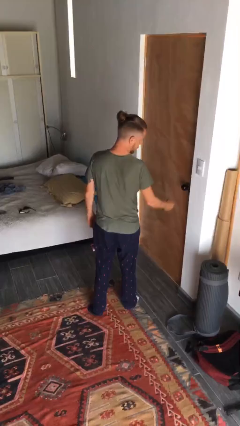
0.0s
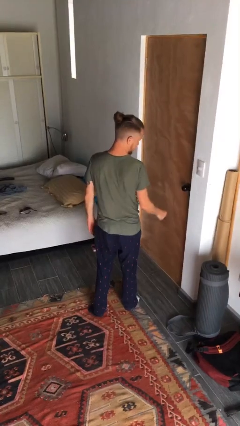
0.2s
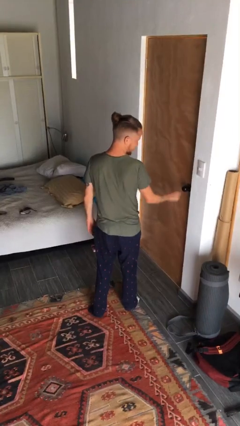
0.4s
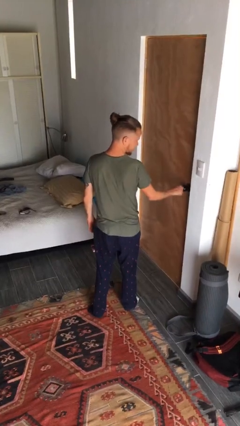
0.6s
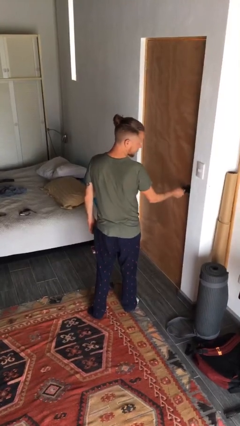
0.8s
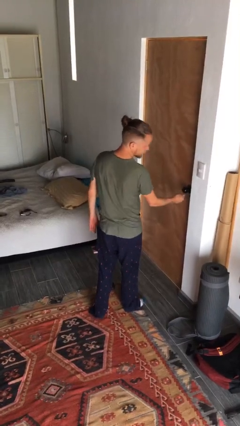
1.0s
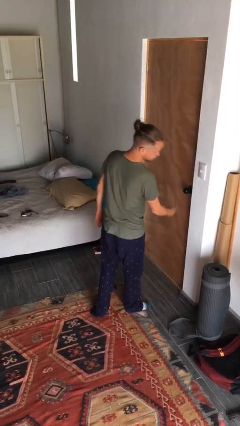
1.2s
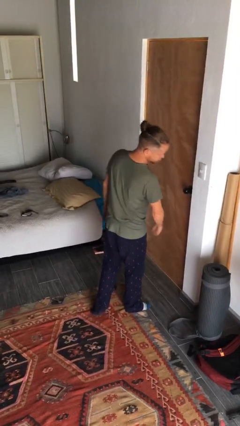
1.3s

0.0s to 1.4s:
person locks door with keys

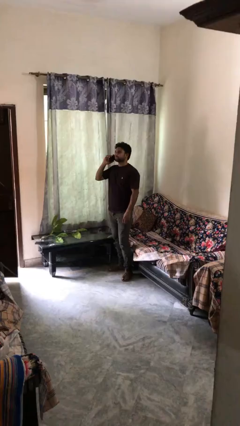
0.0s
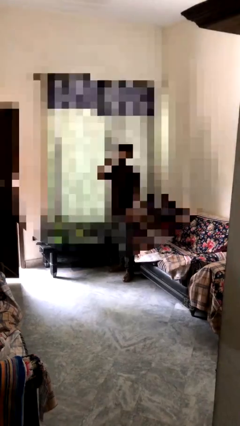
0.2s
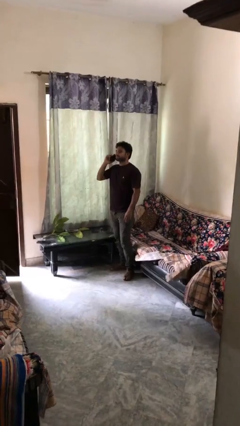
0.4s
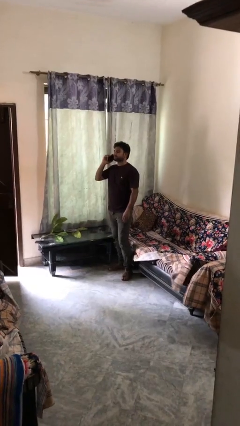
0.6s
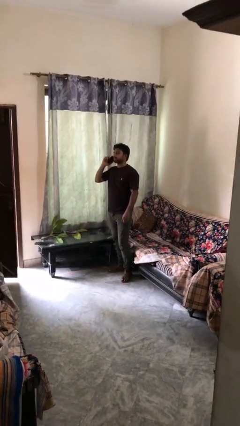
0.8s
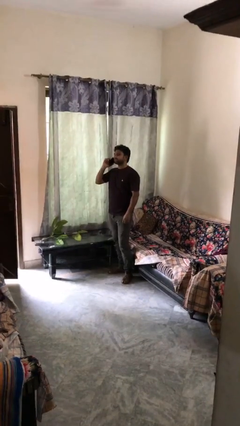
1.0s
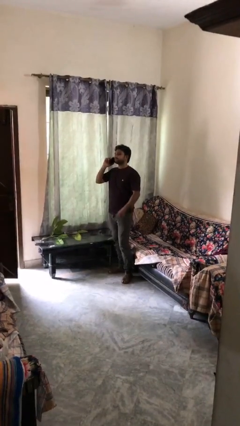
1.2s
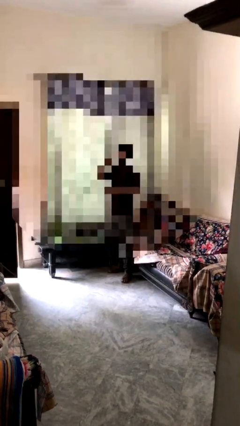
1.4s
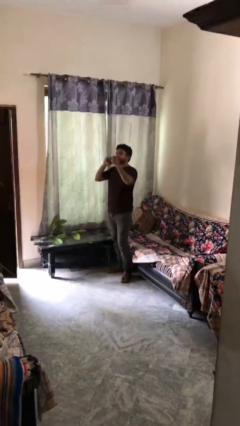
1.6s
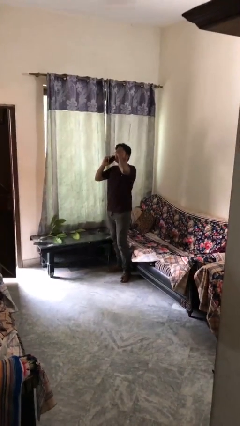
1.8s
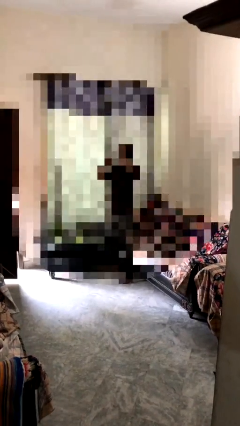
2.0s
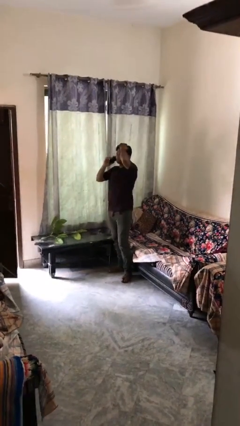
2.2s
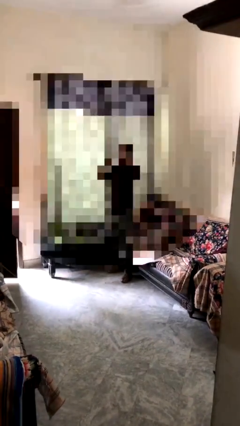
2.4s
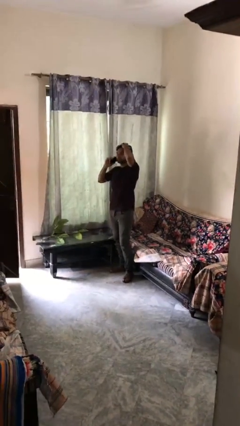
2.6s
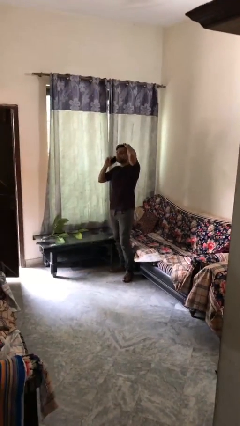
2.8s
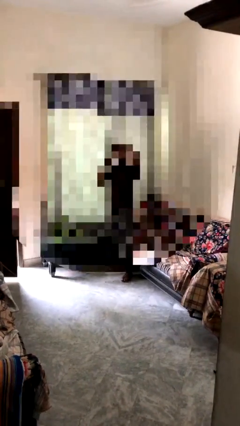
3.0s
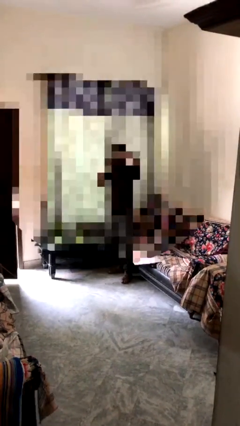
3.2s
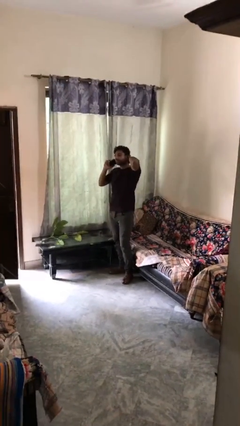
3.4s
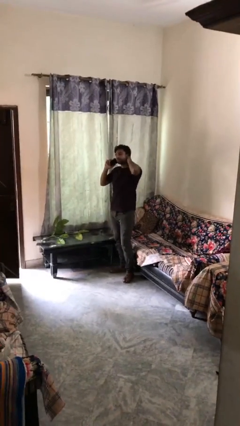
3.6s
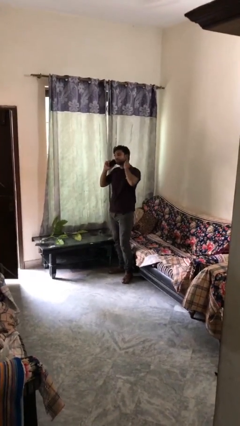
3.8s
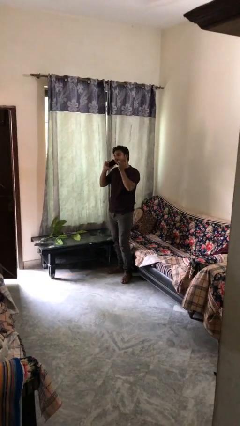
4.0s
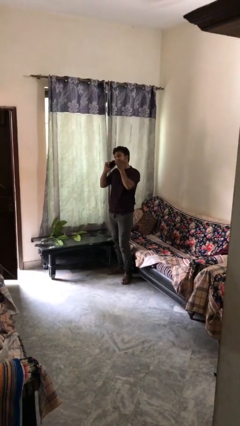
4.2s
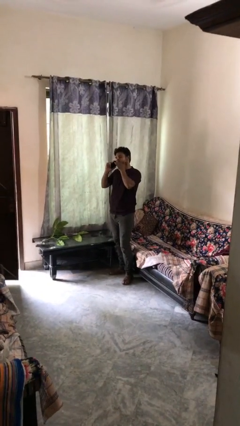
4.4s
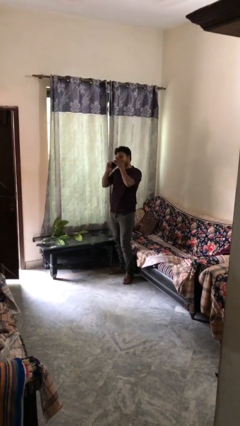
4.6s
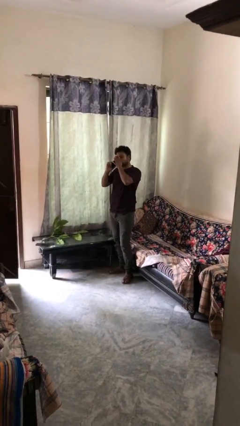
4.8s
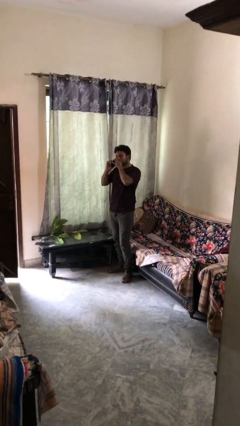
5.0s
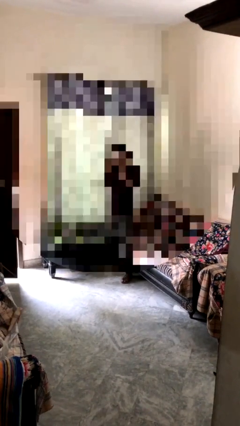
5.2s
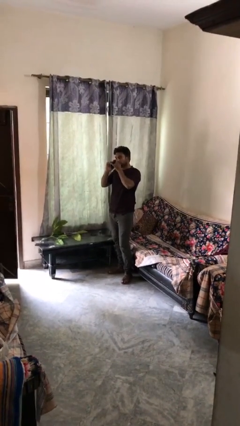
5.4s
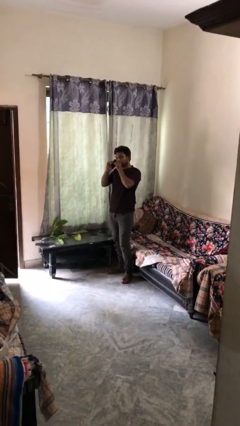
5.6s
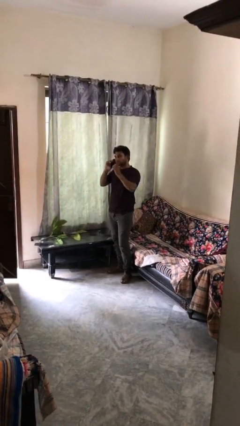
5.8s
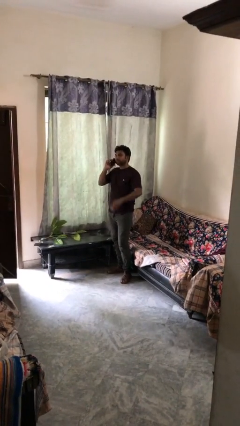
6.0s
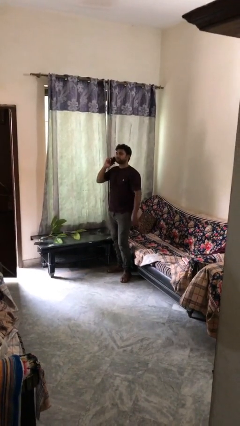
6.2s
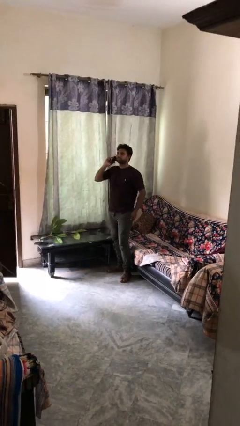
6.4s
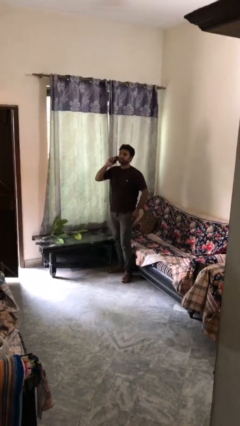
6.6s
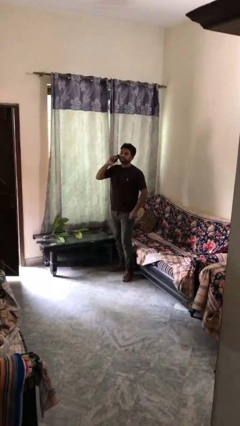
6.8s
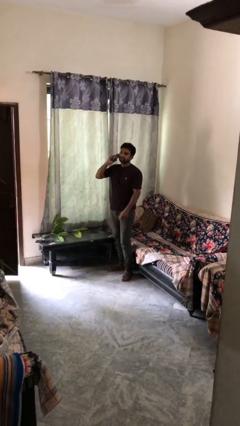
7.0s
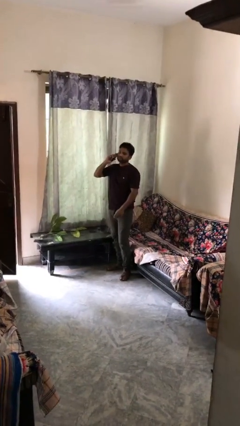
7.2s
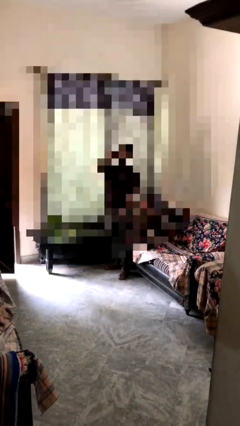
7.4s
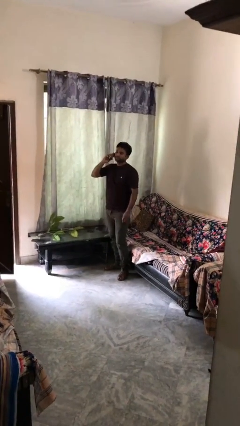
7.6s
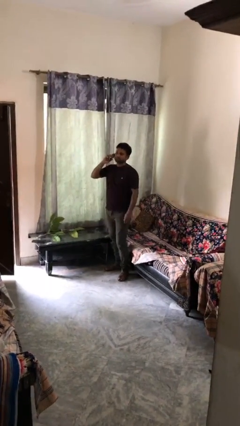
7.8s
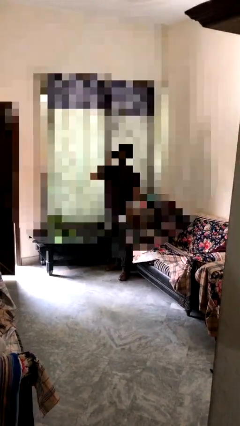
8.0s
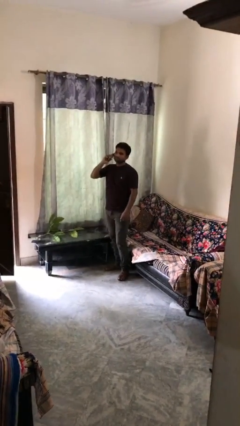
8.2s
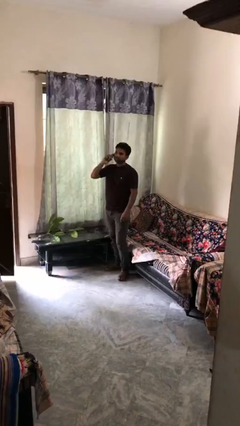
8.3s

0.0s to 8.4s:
person talks on phone

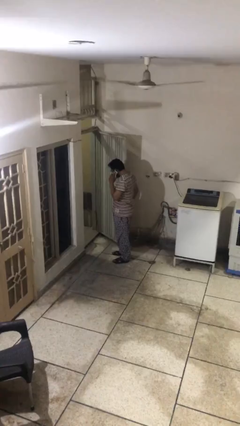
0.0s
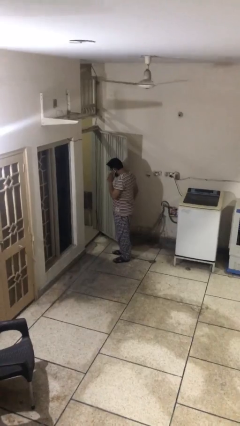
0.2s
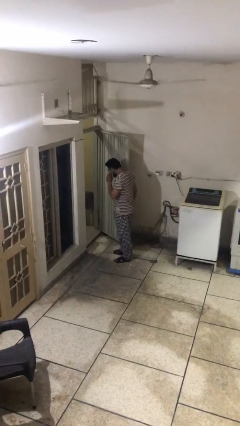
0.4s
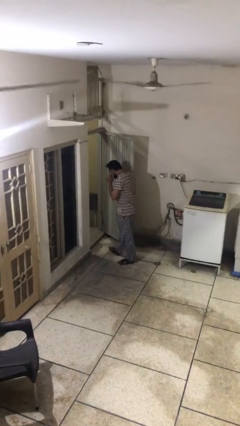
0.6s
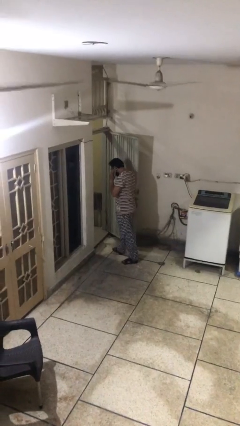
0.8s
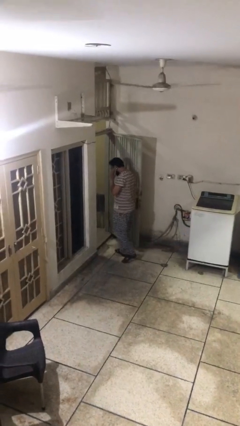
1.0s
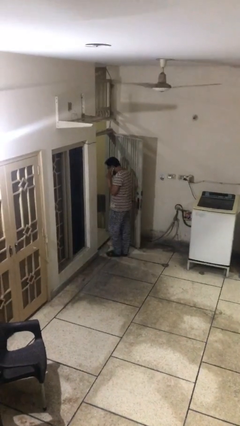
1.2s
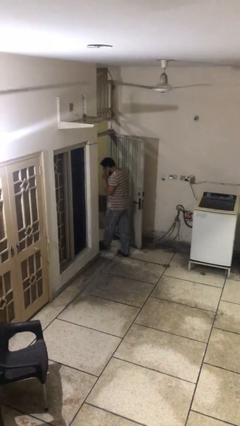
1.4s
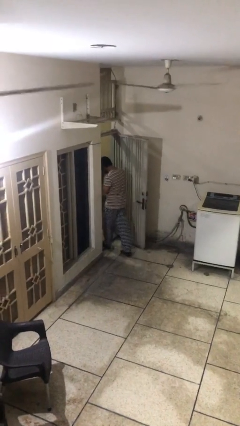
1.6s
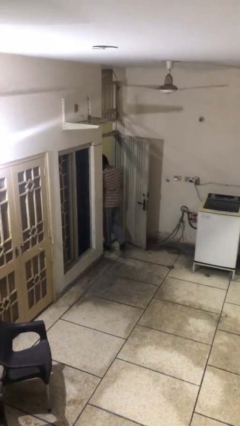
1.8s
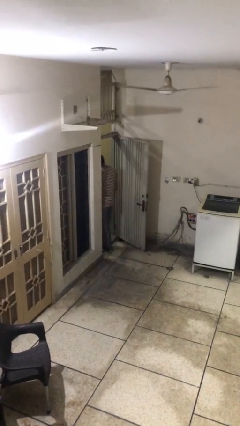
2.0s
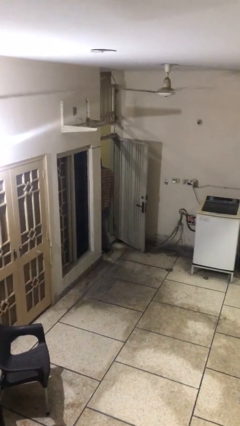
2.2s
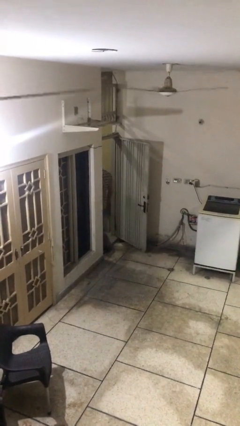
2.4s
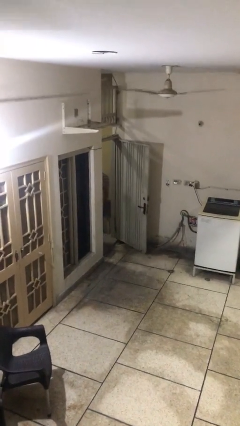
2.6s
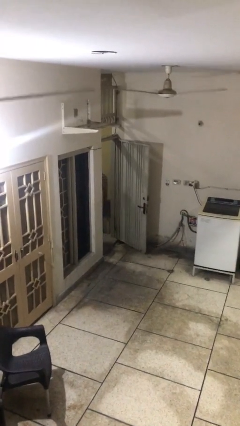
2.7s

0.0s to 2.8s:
person exits scene through structure

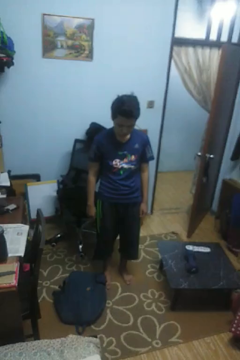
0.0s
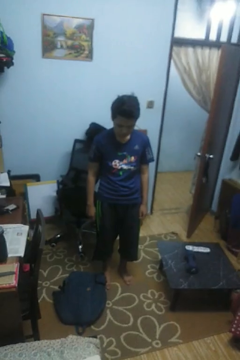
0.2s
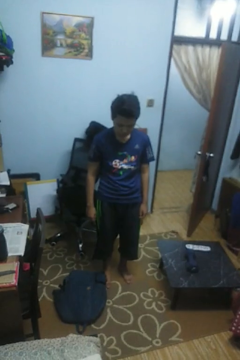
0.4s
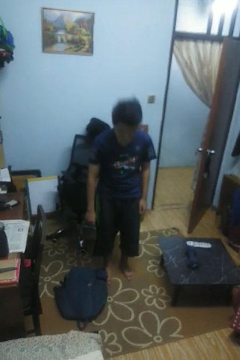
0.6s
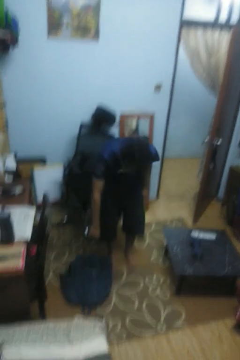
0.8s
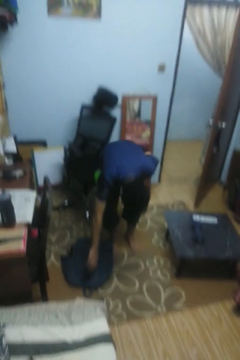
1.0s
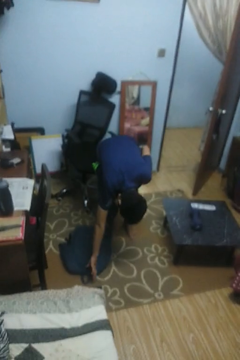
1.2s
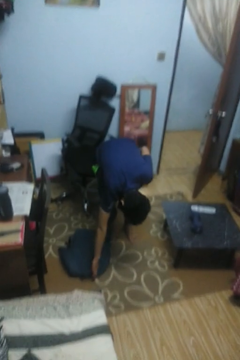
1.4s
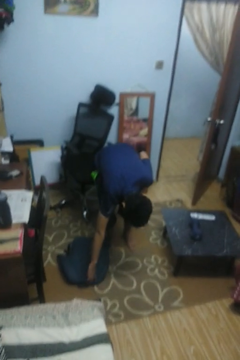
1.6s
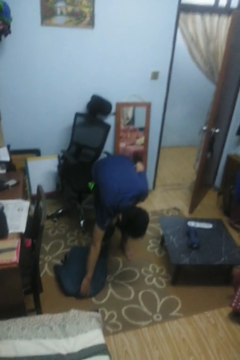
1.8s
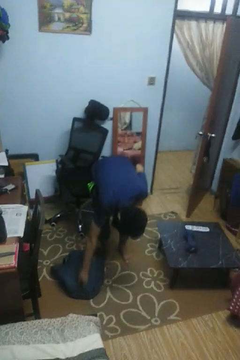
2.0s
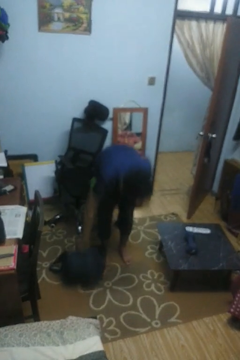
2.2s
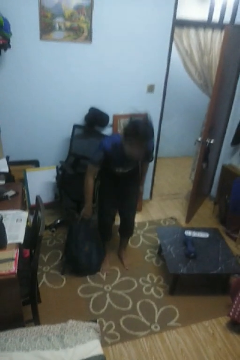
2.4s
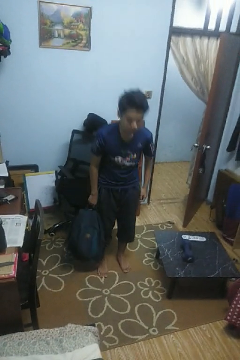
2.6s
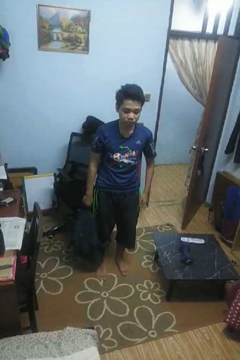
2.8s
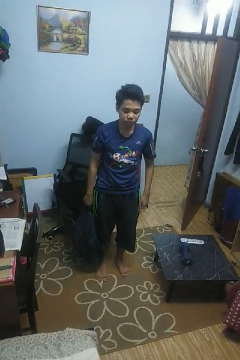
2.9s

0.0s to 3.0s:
person picks up object from floor

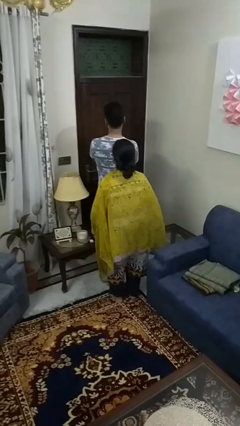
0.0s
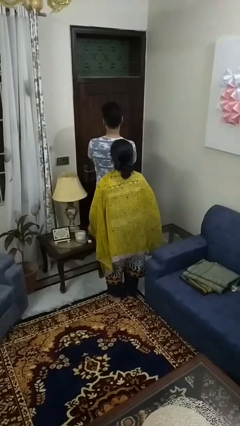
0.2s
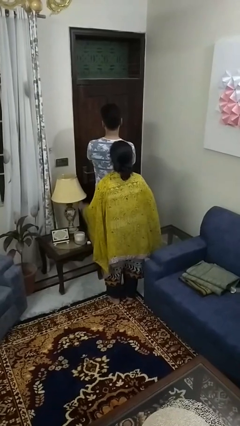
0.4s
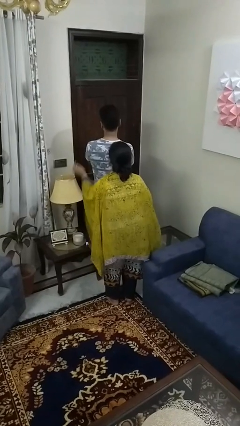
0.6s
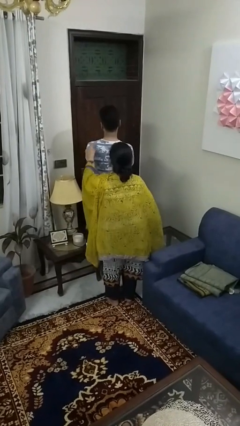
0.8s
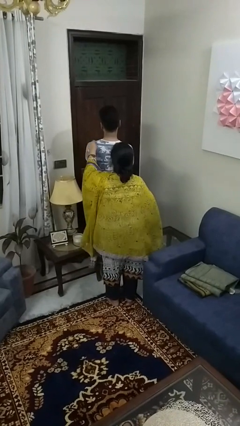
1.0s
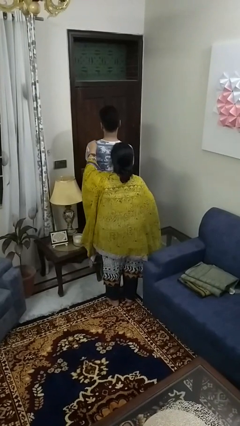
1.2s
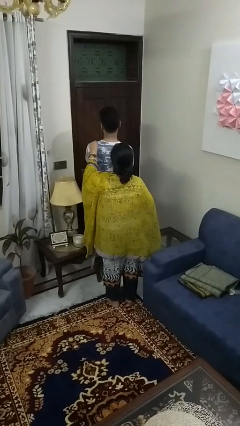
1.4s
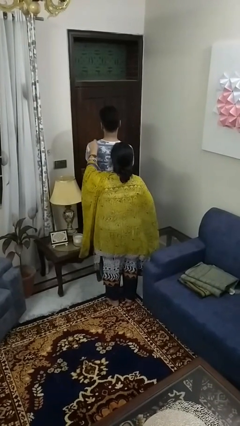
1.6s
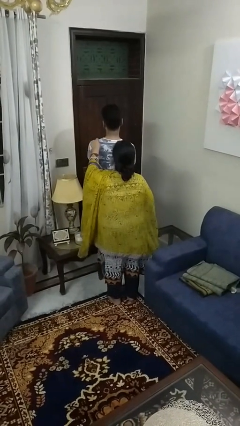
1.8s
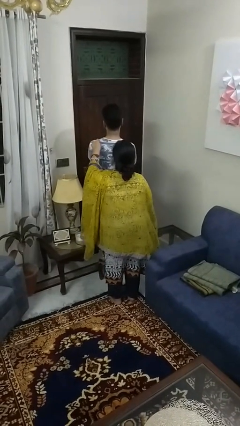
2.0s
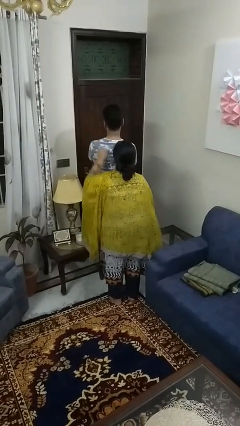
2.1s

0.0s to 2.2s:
person touches back of person

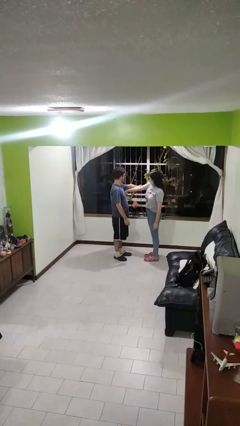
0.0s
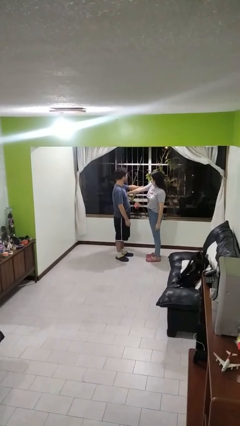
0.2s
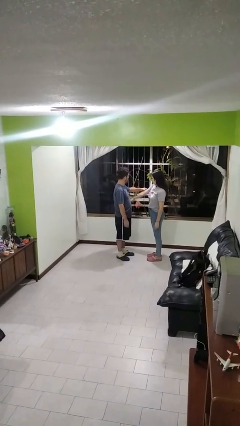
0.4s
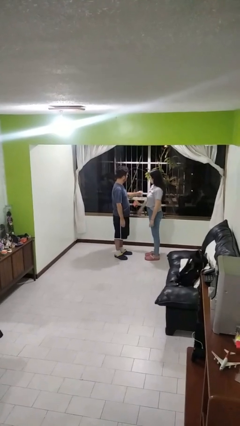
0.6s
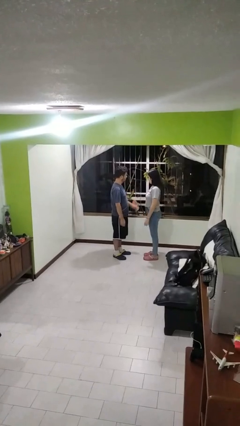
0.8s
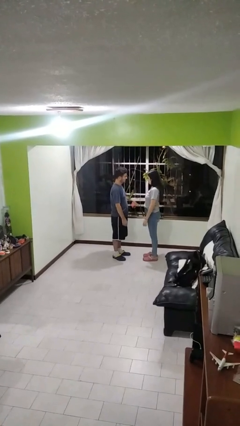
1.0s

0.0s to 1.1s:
person grabs person by bicep
